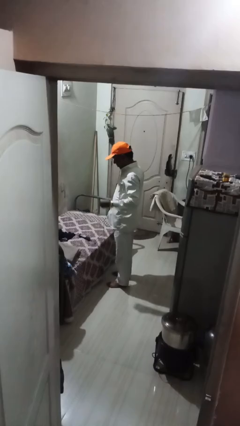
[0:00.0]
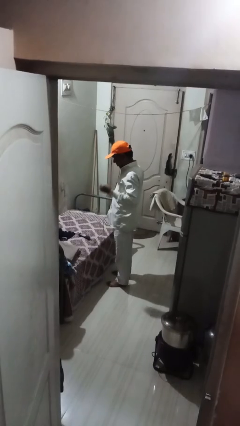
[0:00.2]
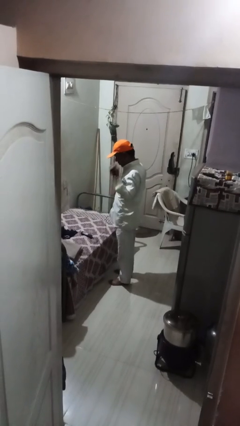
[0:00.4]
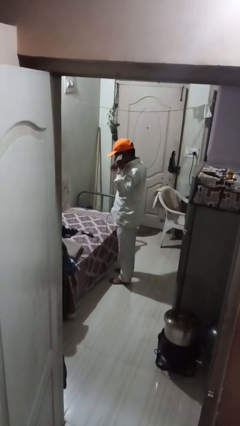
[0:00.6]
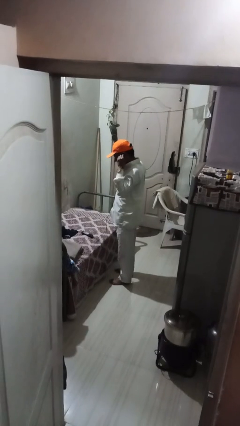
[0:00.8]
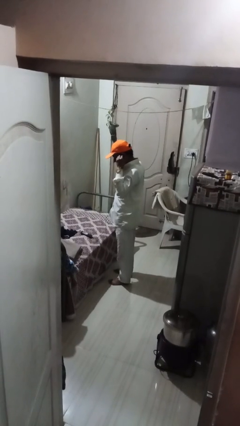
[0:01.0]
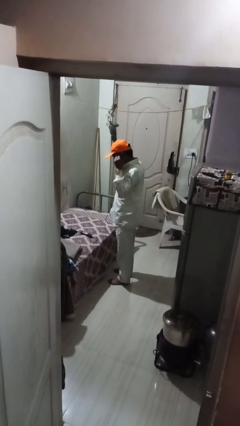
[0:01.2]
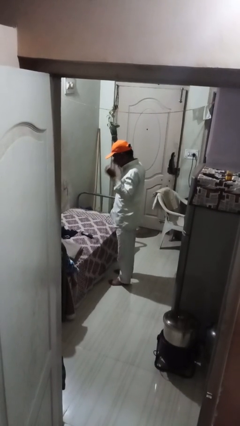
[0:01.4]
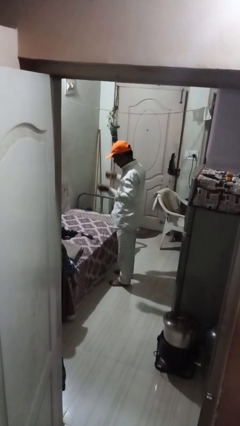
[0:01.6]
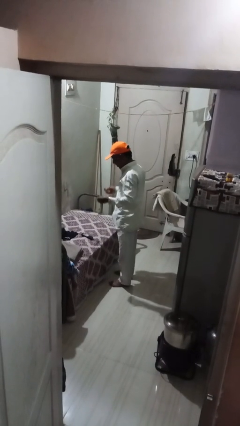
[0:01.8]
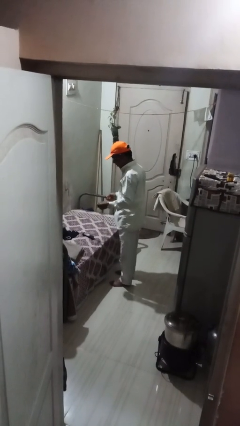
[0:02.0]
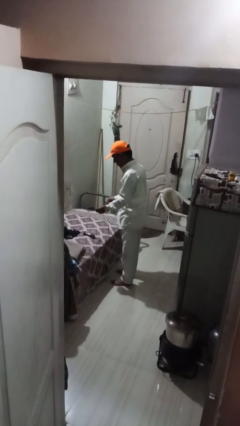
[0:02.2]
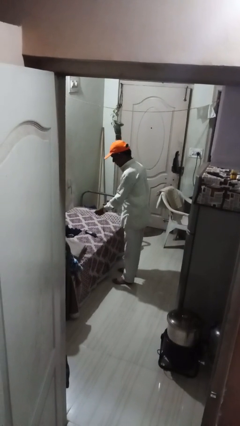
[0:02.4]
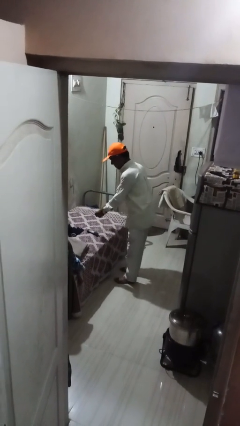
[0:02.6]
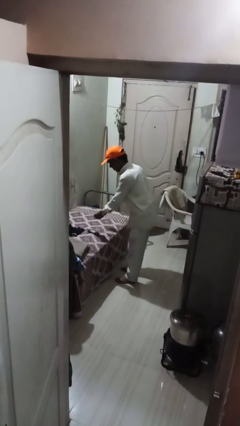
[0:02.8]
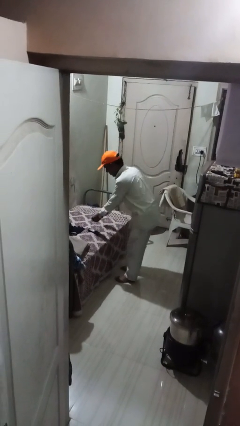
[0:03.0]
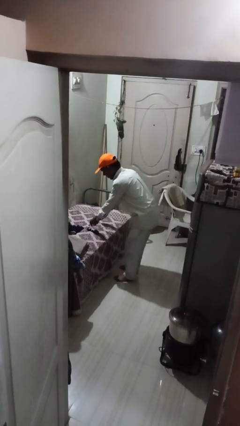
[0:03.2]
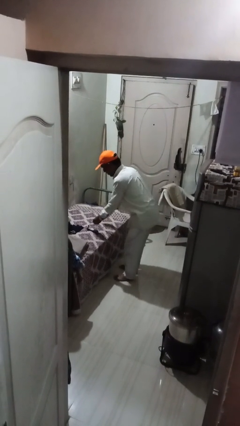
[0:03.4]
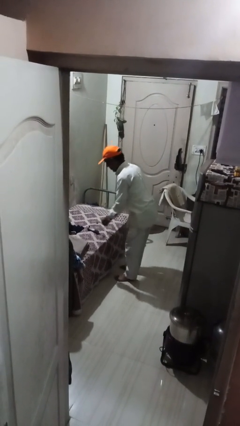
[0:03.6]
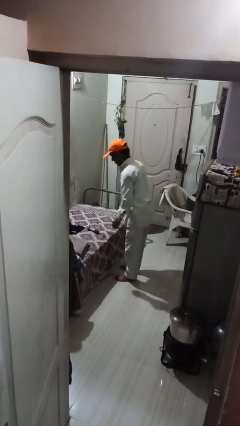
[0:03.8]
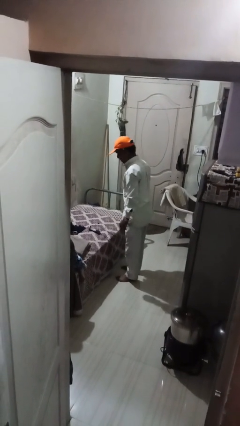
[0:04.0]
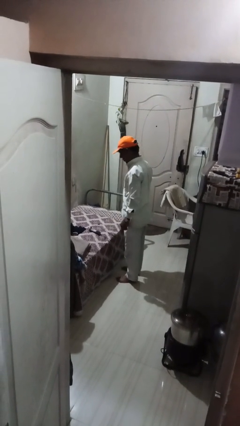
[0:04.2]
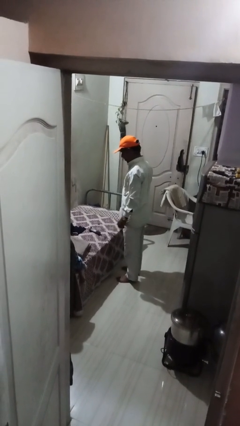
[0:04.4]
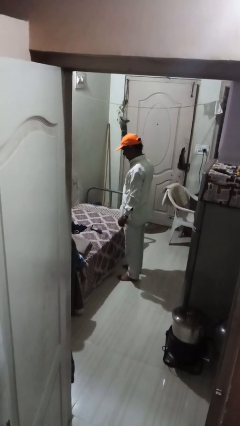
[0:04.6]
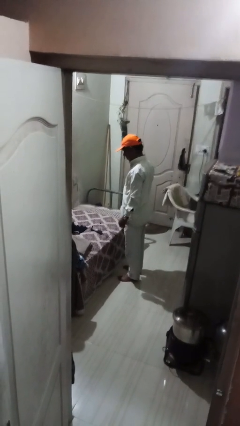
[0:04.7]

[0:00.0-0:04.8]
person takes off headphones

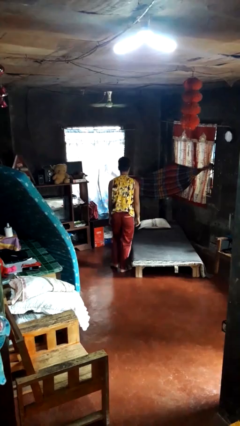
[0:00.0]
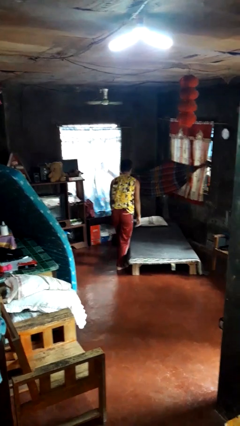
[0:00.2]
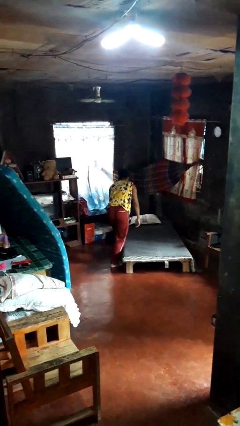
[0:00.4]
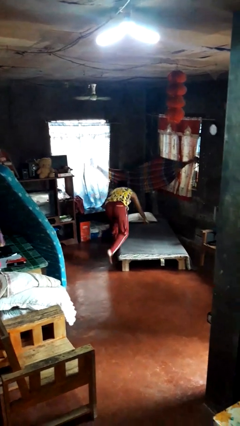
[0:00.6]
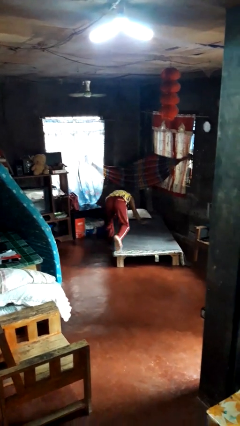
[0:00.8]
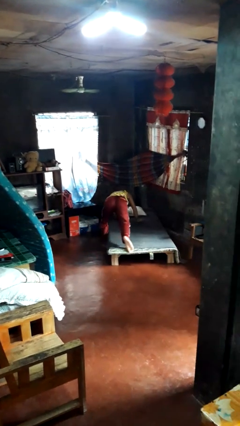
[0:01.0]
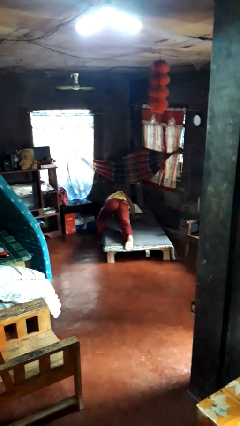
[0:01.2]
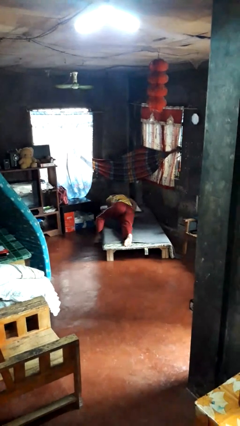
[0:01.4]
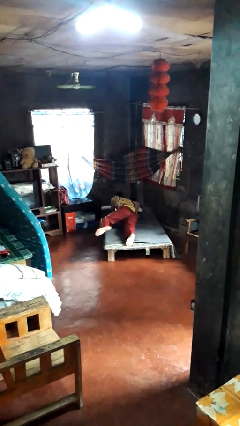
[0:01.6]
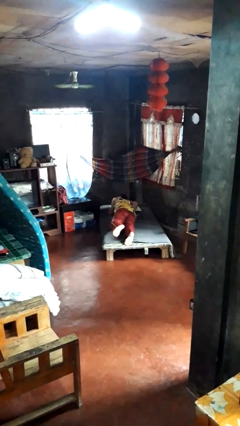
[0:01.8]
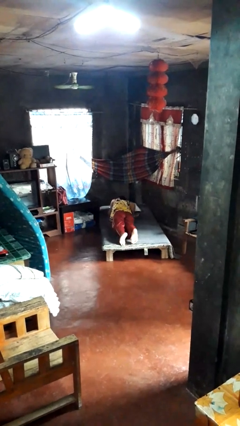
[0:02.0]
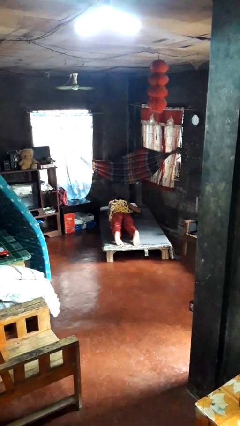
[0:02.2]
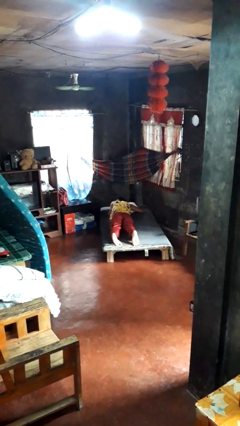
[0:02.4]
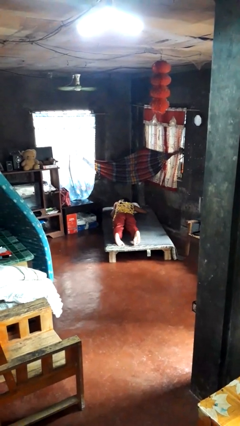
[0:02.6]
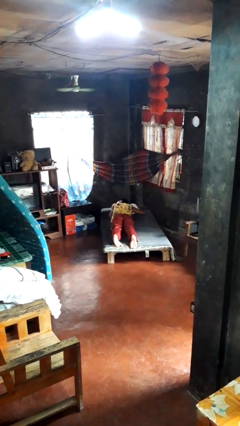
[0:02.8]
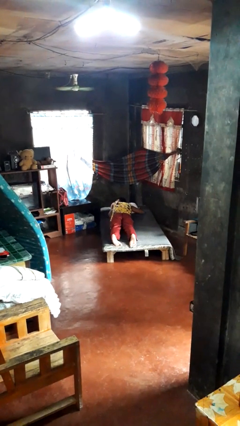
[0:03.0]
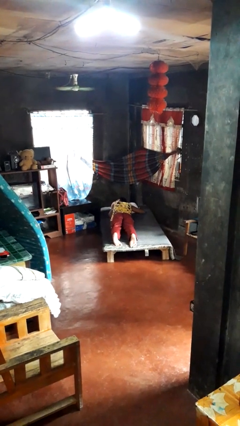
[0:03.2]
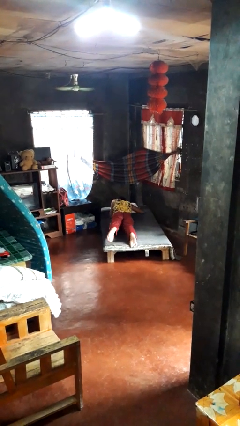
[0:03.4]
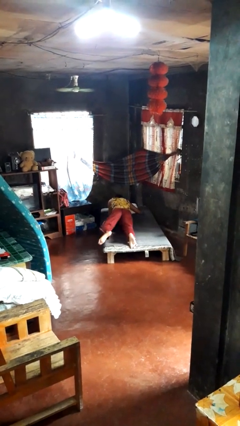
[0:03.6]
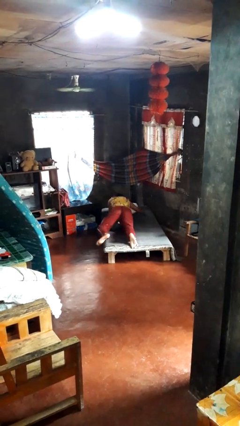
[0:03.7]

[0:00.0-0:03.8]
person lies down on bed

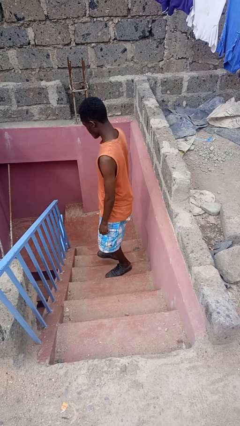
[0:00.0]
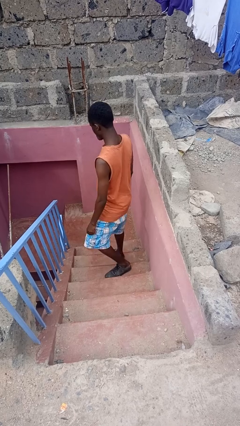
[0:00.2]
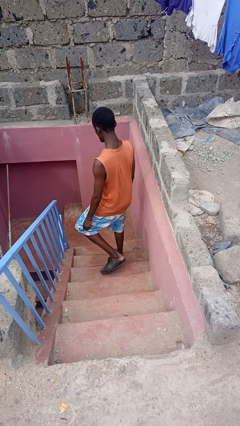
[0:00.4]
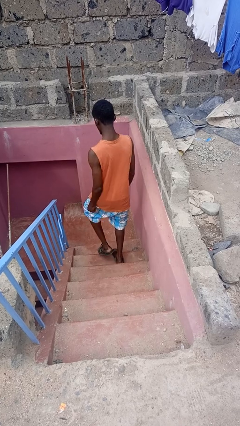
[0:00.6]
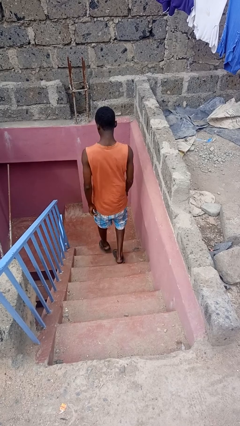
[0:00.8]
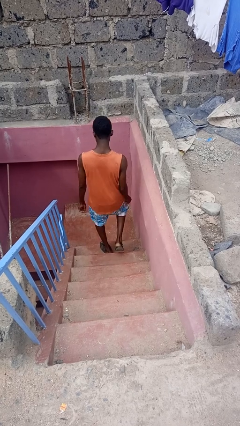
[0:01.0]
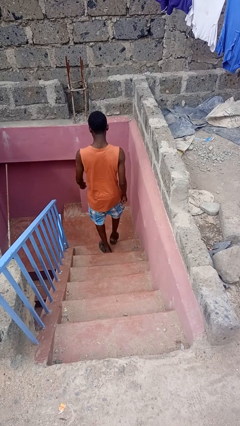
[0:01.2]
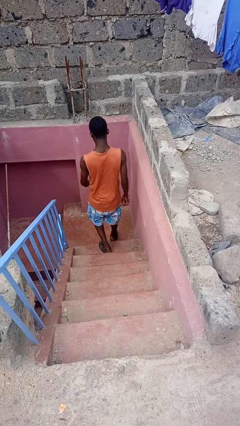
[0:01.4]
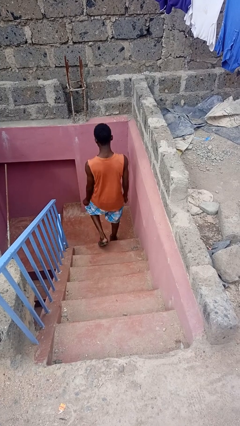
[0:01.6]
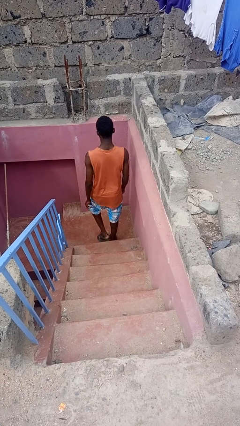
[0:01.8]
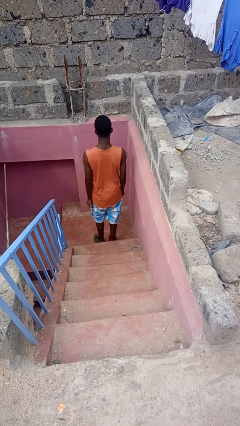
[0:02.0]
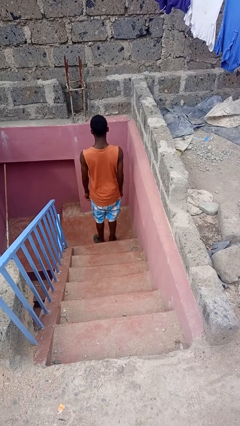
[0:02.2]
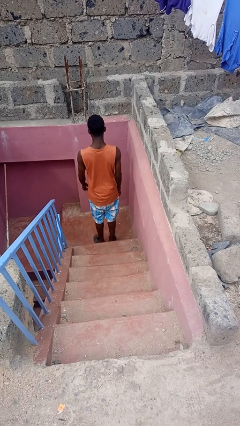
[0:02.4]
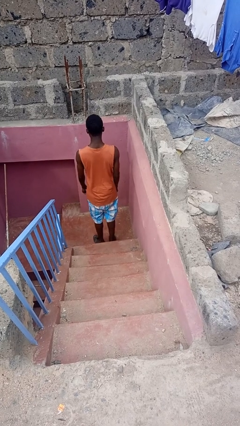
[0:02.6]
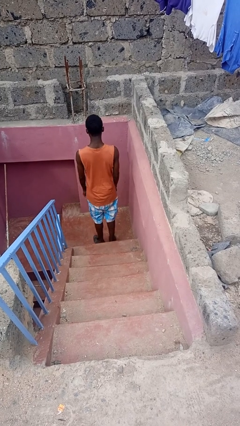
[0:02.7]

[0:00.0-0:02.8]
person climbs down stairs

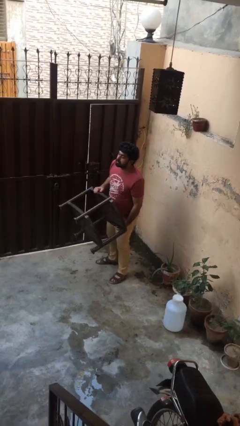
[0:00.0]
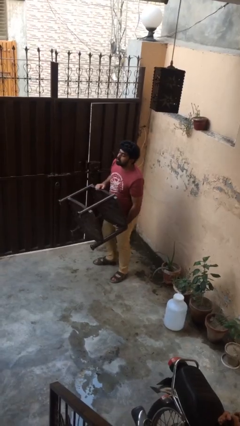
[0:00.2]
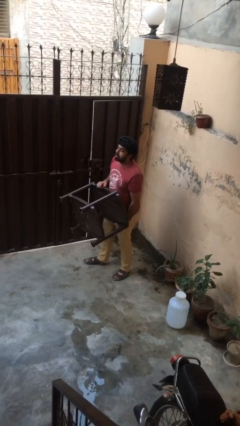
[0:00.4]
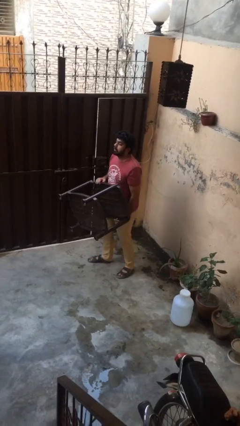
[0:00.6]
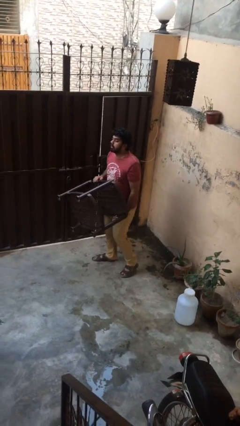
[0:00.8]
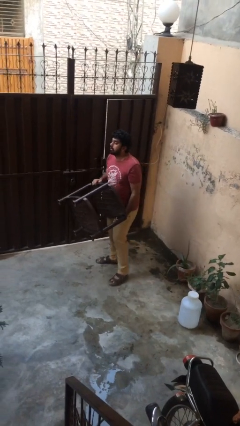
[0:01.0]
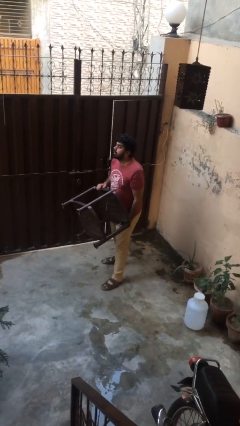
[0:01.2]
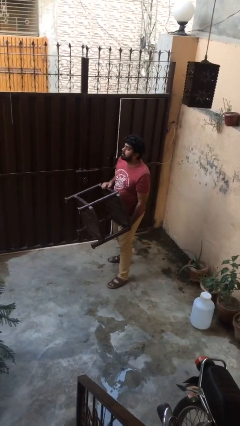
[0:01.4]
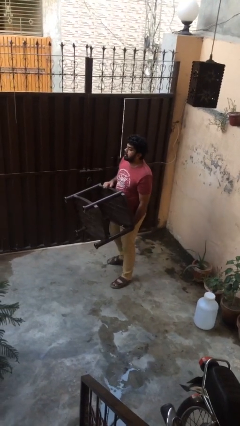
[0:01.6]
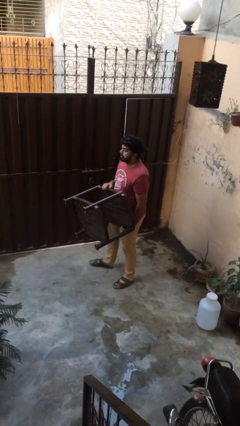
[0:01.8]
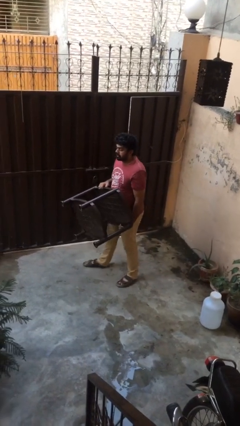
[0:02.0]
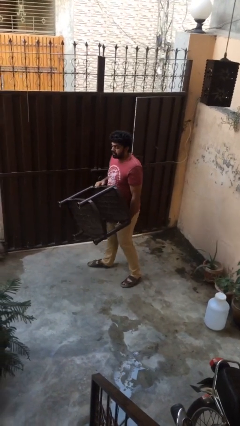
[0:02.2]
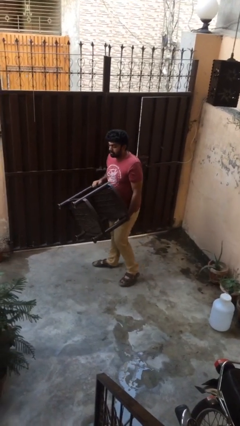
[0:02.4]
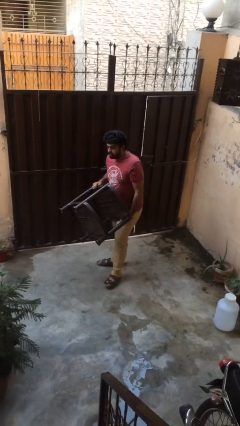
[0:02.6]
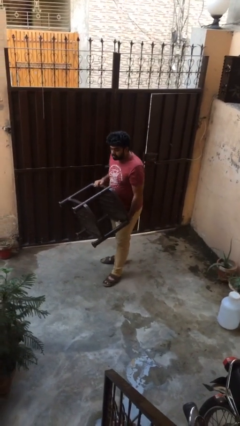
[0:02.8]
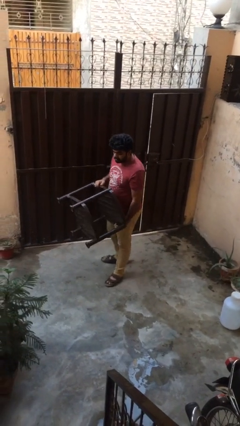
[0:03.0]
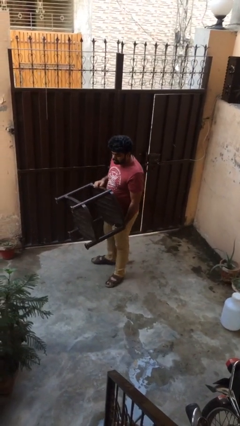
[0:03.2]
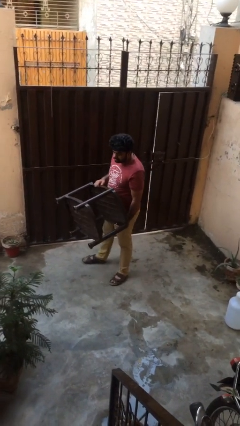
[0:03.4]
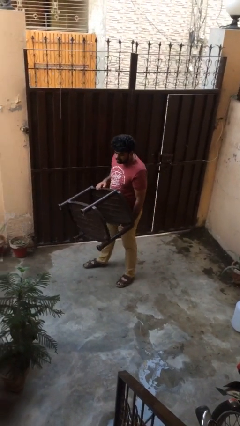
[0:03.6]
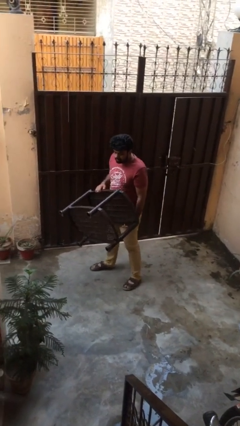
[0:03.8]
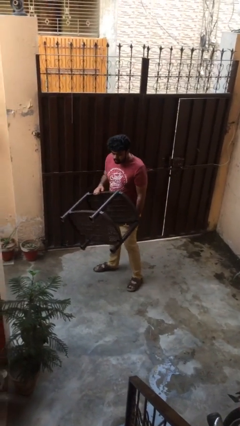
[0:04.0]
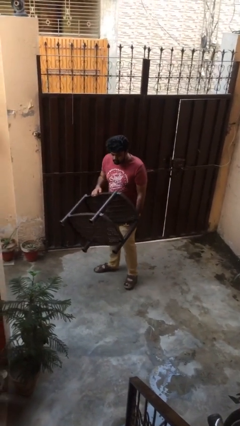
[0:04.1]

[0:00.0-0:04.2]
person carries heavy object

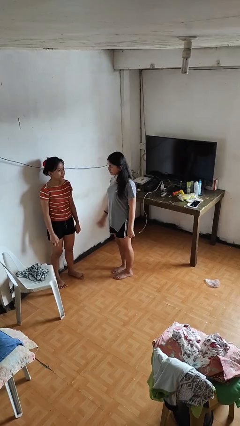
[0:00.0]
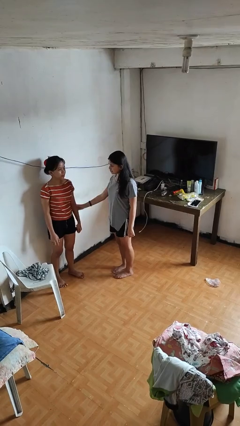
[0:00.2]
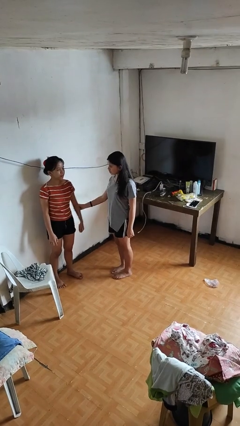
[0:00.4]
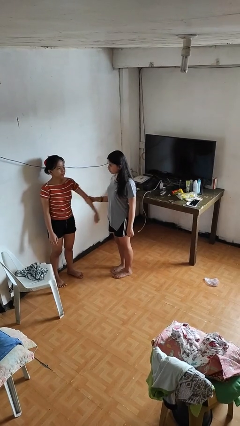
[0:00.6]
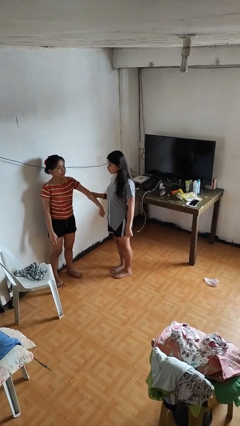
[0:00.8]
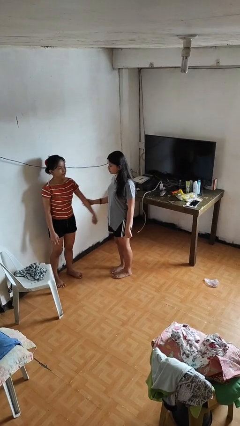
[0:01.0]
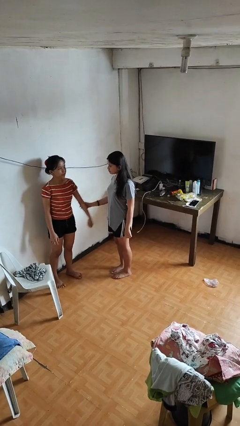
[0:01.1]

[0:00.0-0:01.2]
person grabs person by forearm

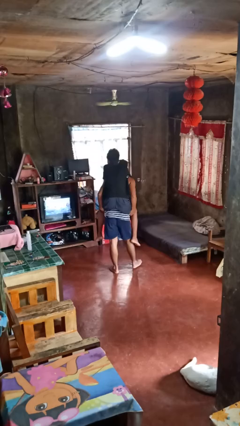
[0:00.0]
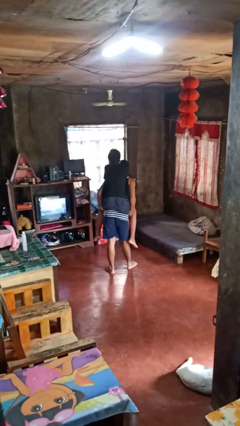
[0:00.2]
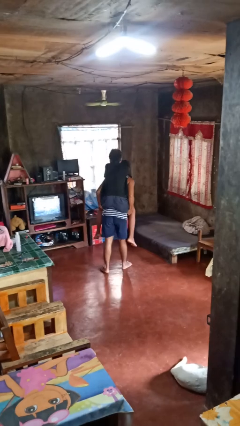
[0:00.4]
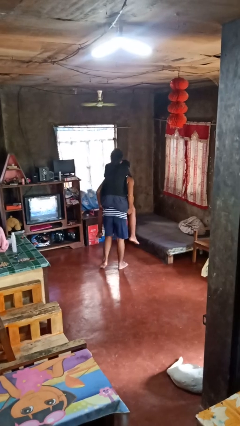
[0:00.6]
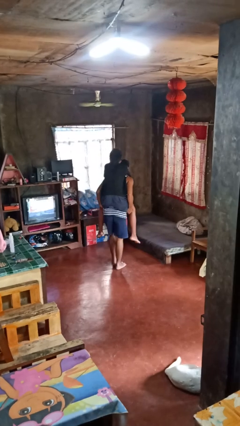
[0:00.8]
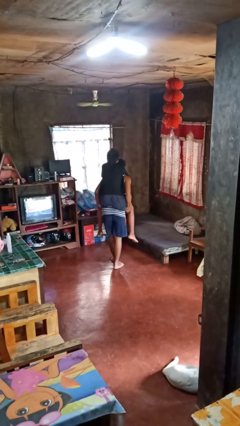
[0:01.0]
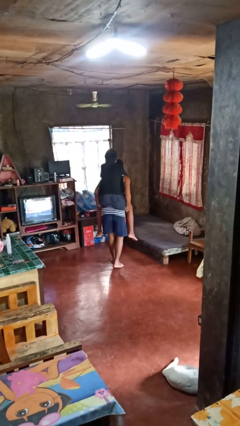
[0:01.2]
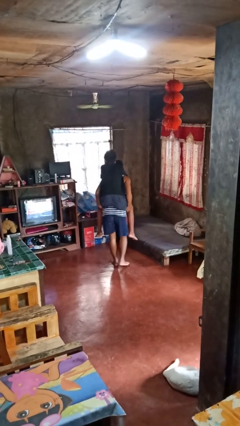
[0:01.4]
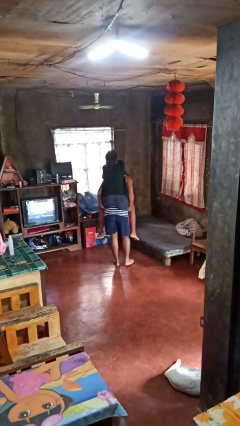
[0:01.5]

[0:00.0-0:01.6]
person carries person on back
